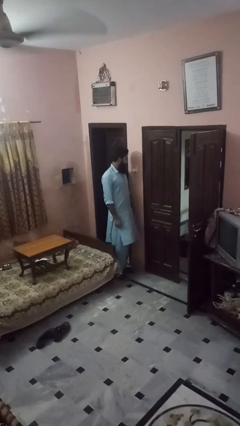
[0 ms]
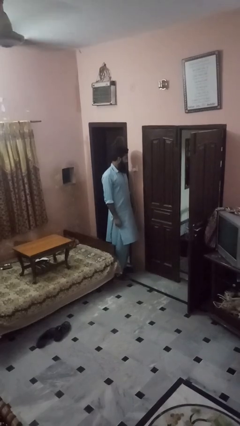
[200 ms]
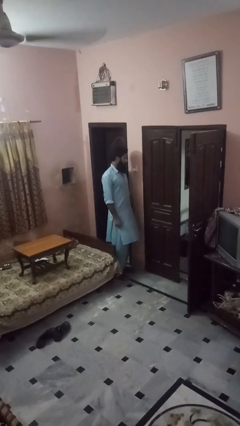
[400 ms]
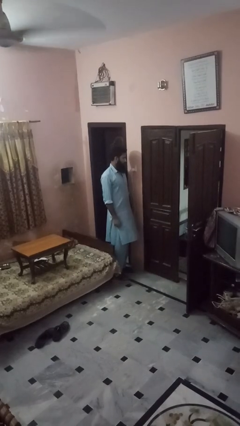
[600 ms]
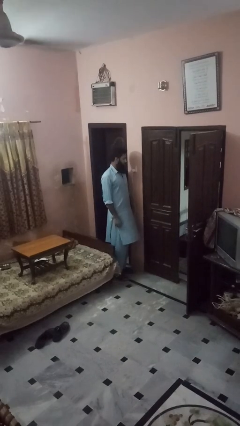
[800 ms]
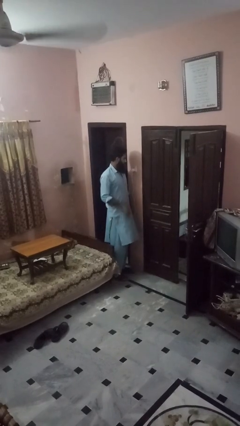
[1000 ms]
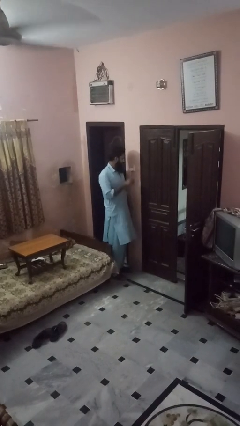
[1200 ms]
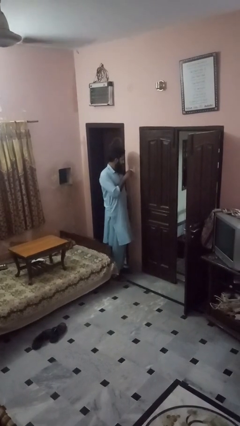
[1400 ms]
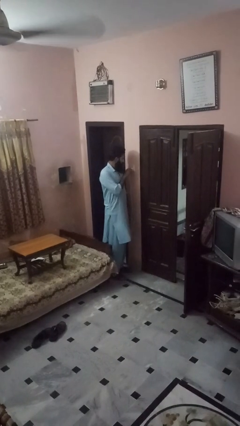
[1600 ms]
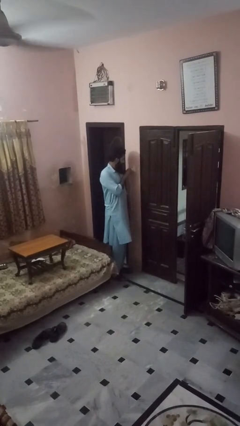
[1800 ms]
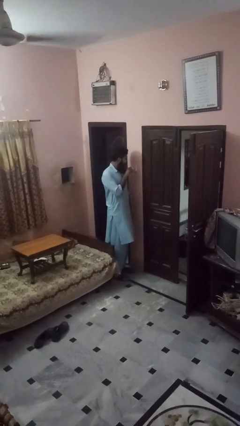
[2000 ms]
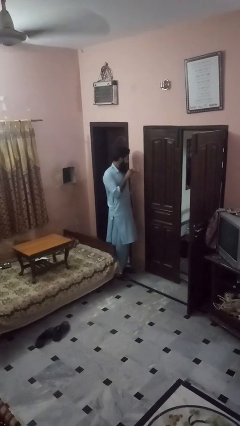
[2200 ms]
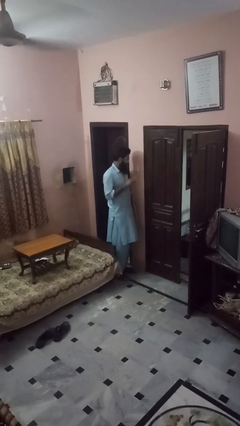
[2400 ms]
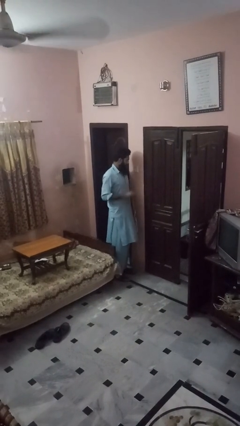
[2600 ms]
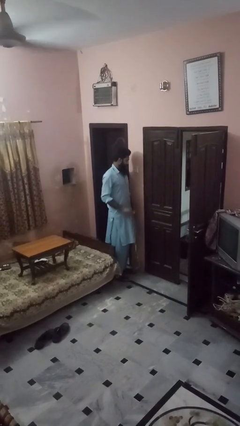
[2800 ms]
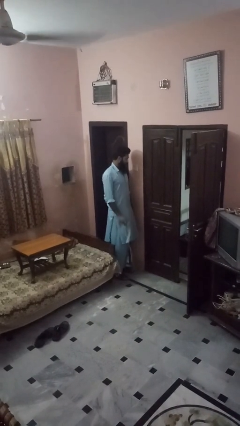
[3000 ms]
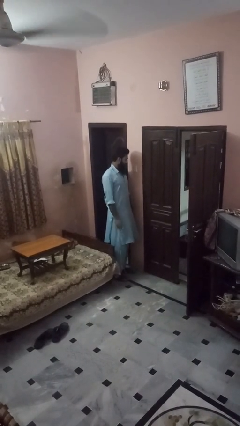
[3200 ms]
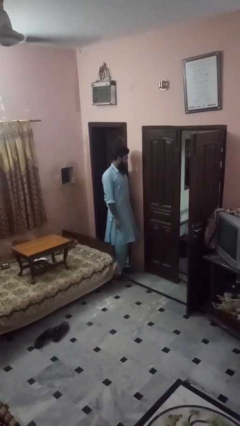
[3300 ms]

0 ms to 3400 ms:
person unplugs from electrical socket

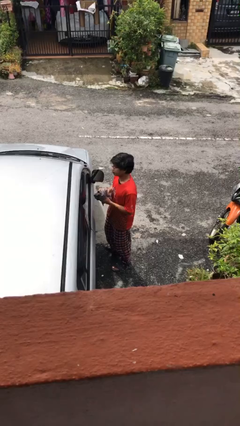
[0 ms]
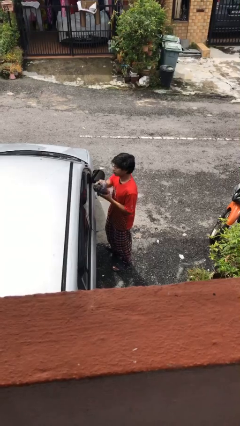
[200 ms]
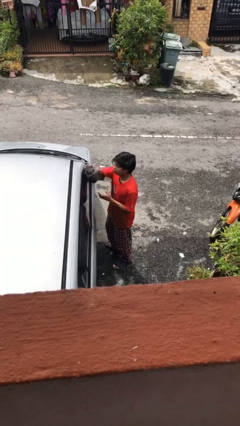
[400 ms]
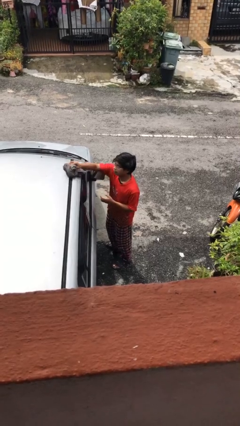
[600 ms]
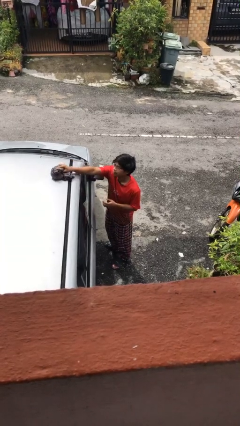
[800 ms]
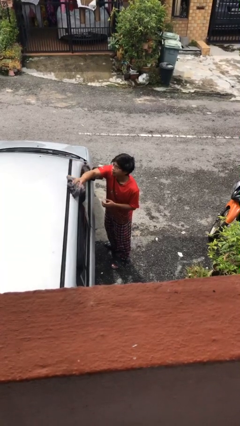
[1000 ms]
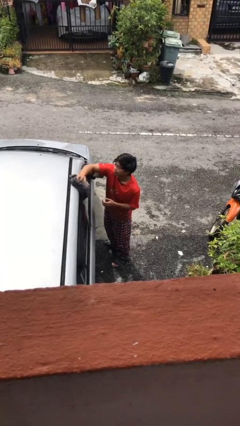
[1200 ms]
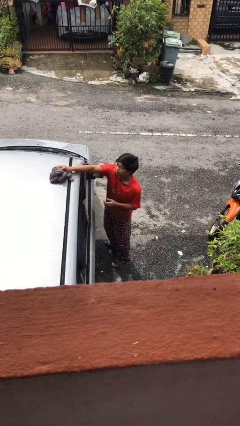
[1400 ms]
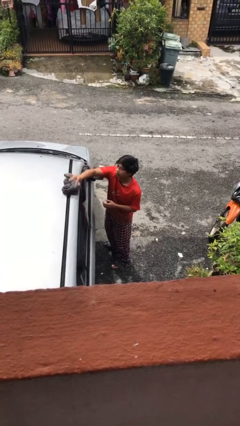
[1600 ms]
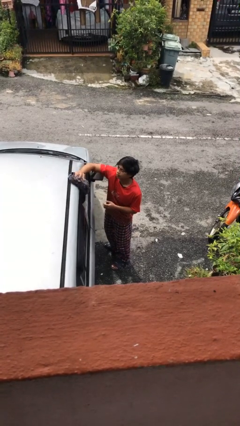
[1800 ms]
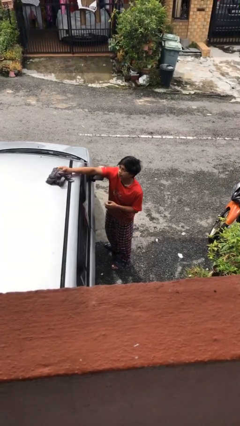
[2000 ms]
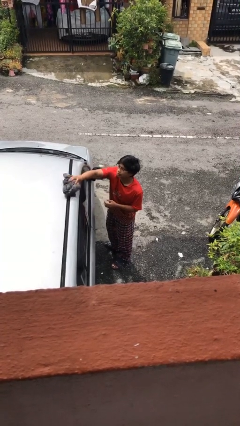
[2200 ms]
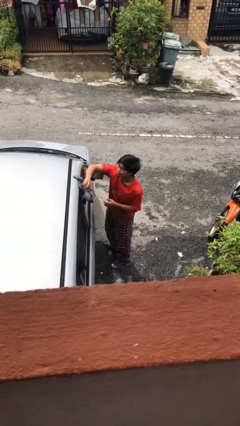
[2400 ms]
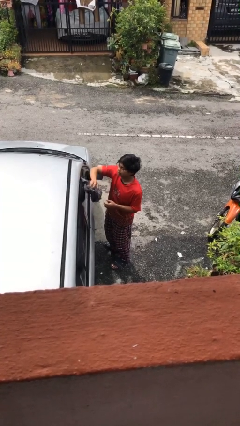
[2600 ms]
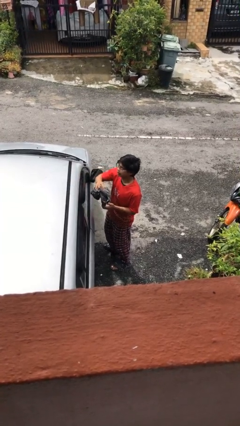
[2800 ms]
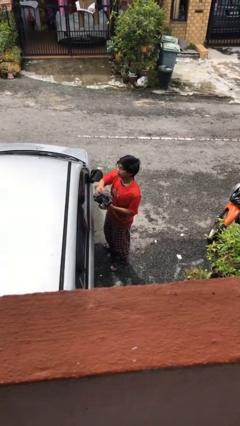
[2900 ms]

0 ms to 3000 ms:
person polishes car with rag

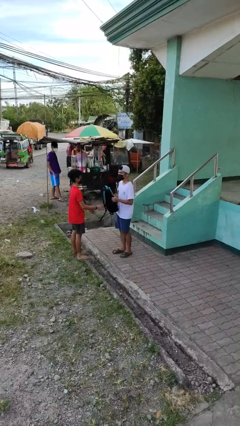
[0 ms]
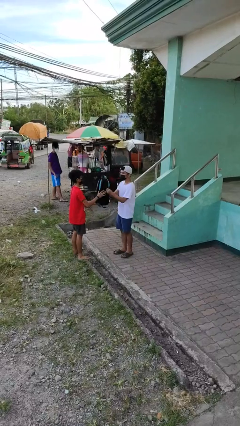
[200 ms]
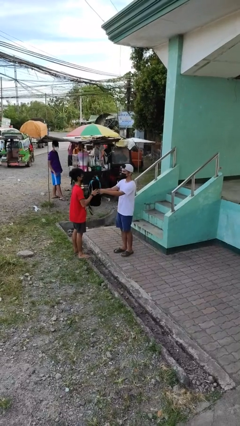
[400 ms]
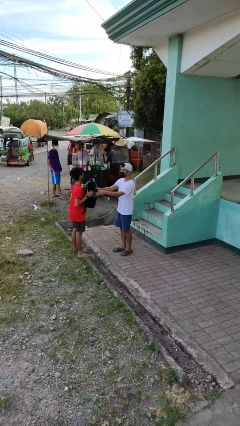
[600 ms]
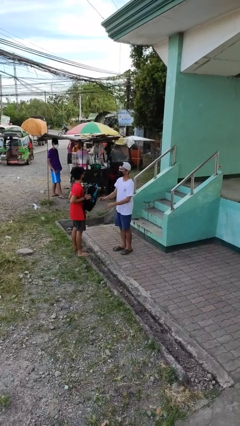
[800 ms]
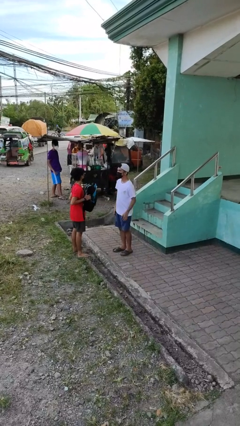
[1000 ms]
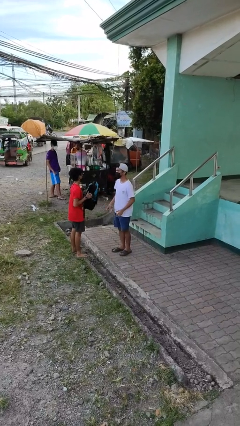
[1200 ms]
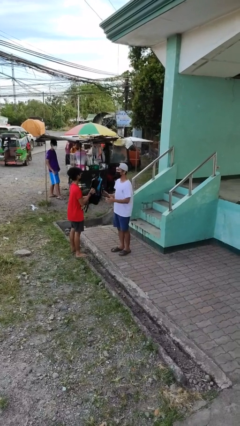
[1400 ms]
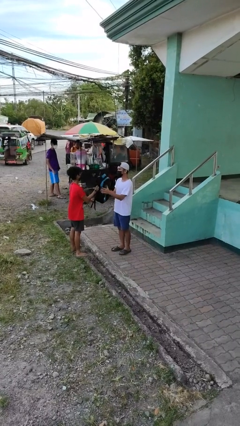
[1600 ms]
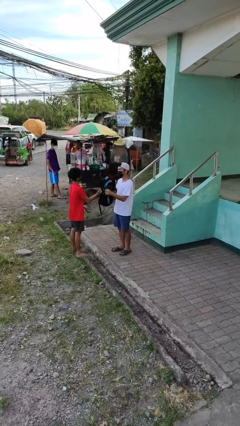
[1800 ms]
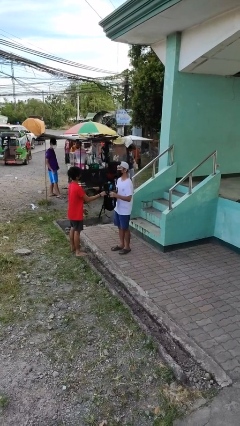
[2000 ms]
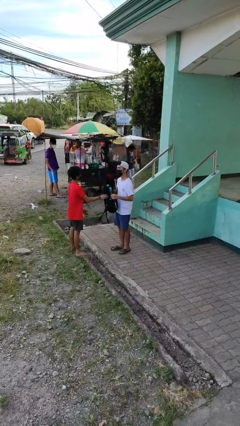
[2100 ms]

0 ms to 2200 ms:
person transfers object to person

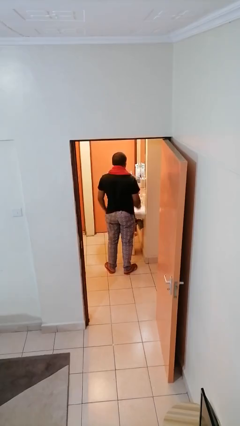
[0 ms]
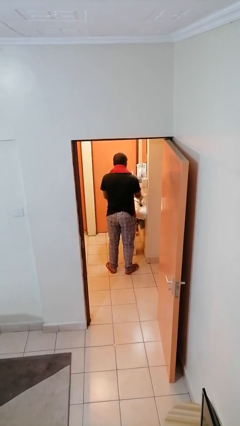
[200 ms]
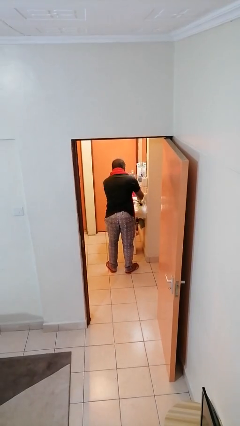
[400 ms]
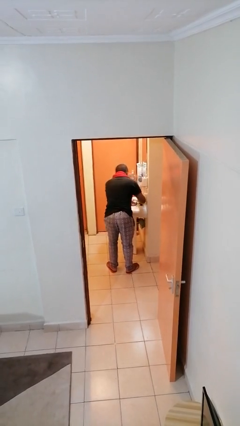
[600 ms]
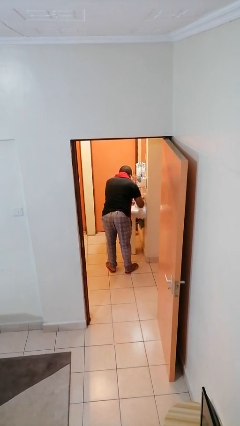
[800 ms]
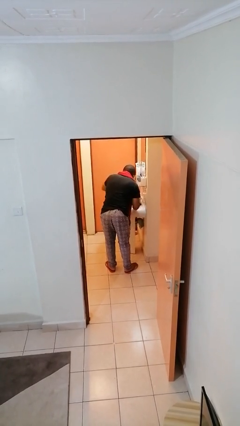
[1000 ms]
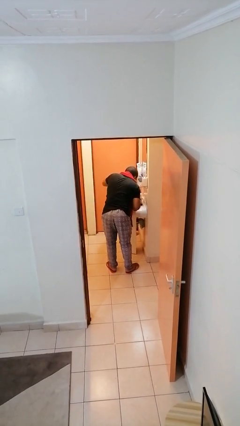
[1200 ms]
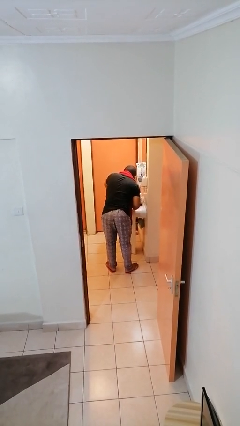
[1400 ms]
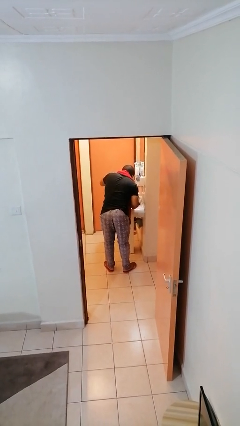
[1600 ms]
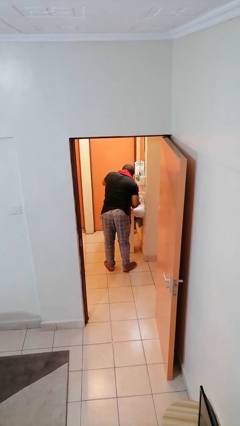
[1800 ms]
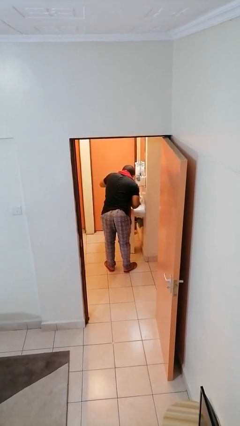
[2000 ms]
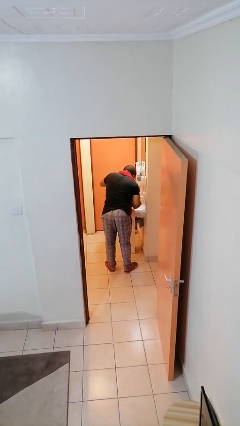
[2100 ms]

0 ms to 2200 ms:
person washes face

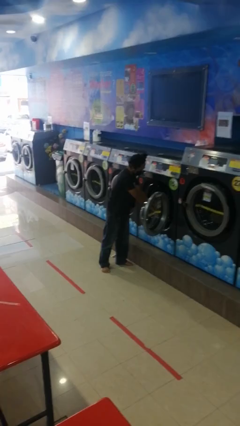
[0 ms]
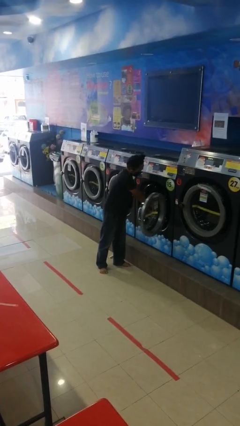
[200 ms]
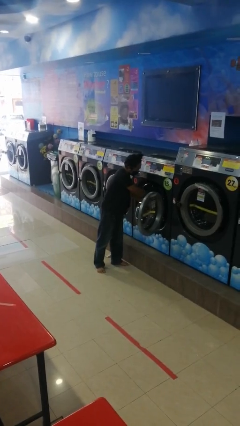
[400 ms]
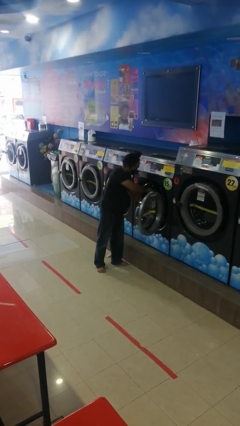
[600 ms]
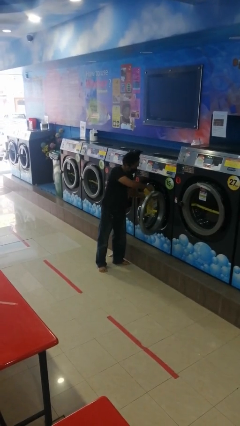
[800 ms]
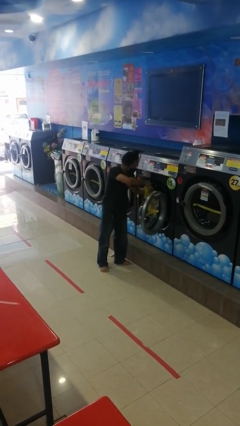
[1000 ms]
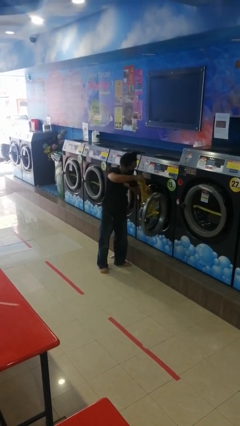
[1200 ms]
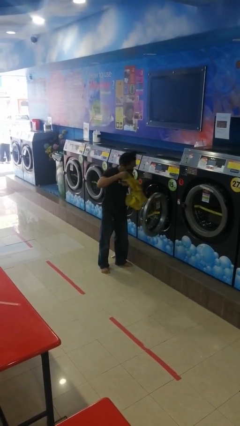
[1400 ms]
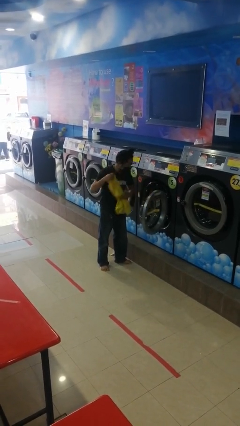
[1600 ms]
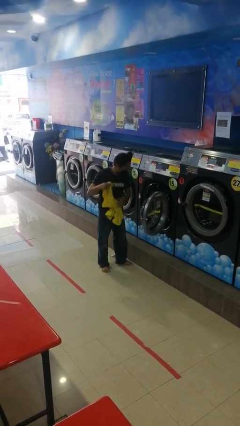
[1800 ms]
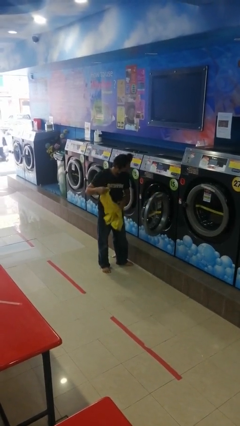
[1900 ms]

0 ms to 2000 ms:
person unloads clotheswasher

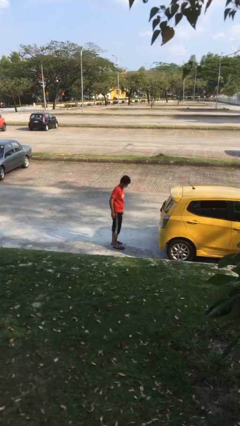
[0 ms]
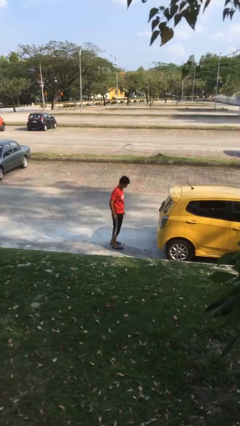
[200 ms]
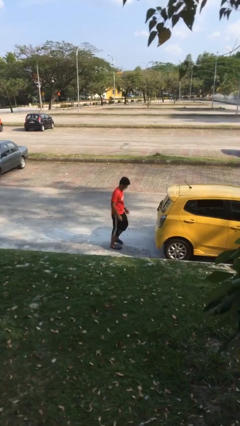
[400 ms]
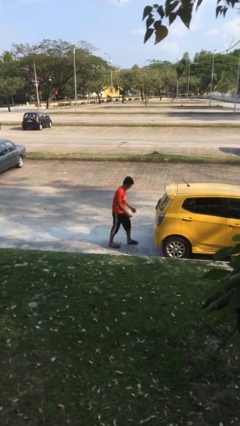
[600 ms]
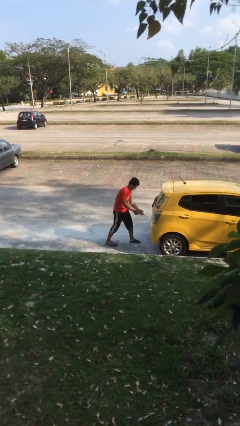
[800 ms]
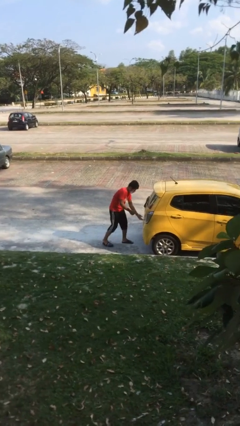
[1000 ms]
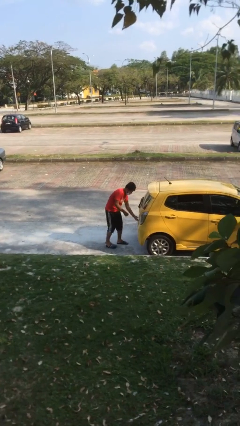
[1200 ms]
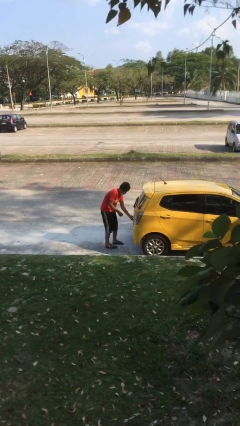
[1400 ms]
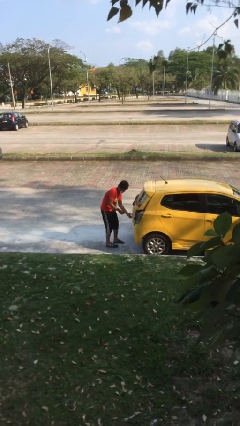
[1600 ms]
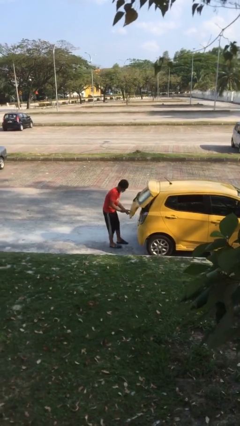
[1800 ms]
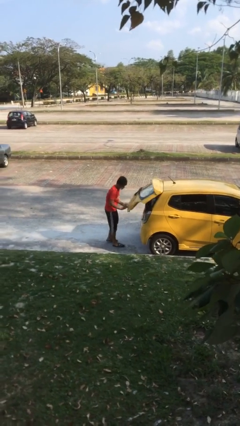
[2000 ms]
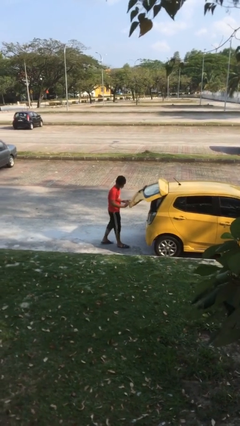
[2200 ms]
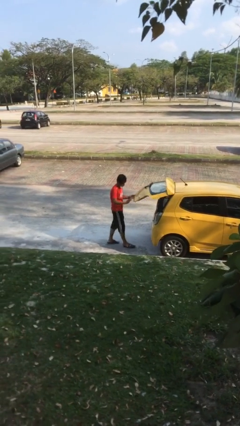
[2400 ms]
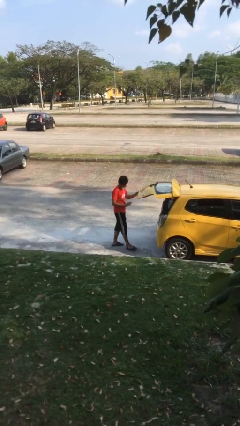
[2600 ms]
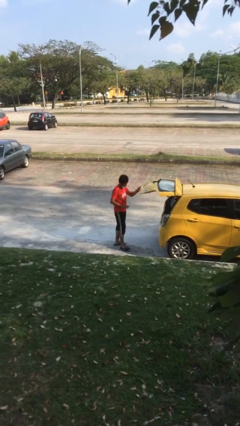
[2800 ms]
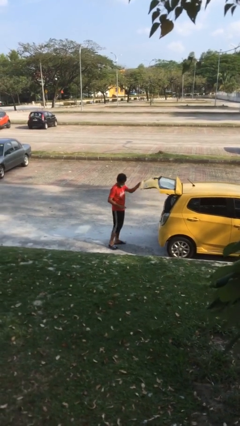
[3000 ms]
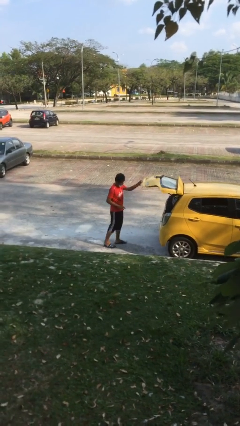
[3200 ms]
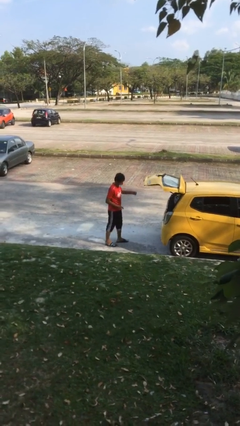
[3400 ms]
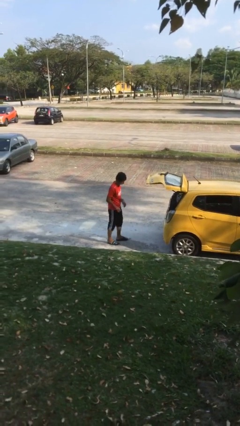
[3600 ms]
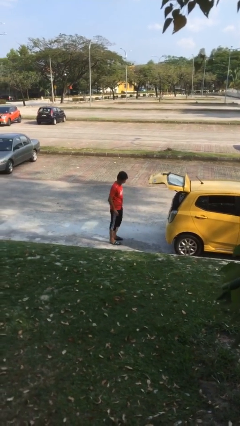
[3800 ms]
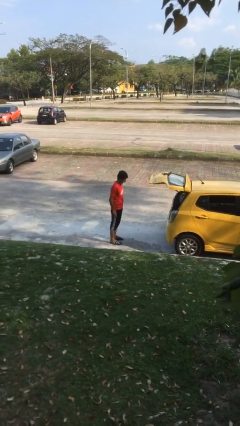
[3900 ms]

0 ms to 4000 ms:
person opens car trunk

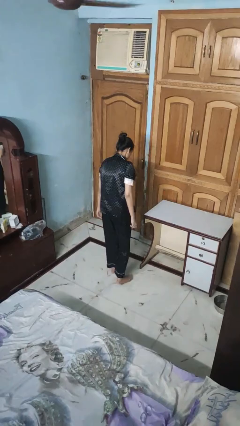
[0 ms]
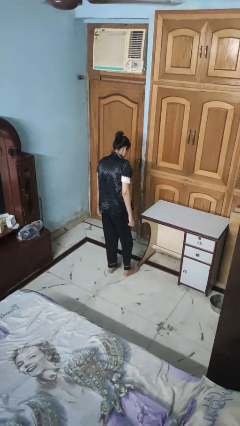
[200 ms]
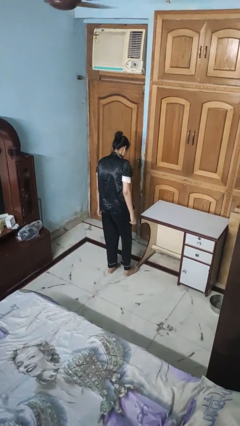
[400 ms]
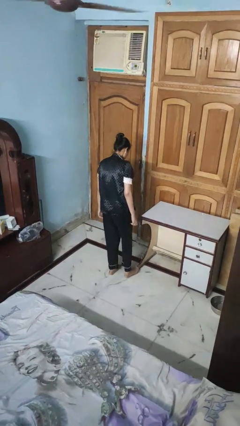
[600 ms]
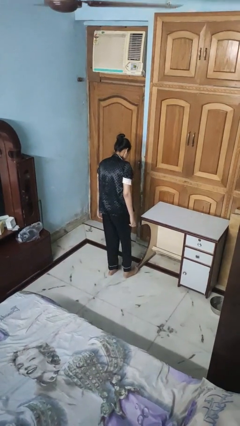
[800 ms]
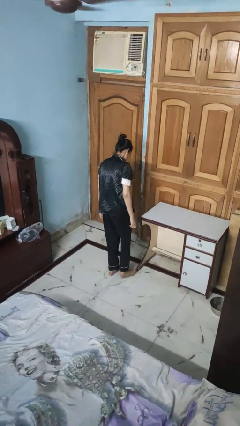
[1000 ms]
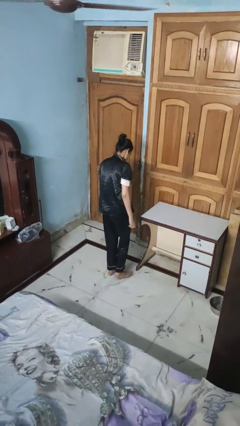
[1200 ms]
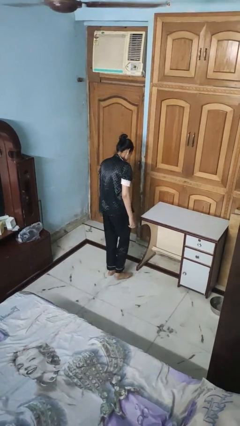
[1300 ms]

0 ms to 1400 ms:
person stubs toe
